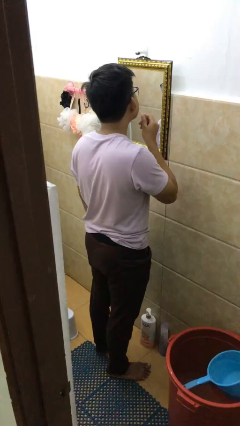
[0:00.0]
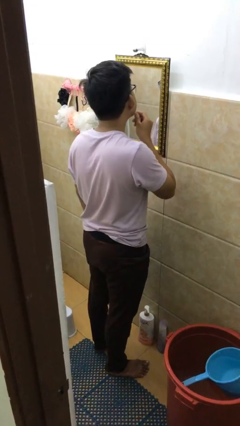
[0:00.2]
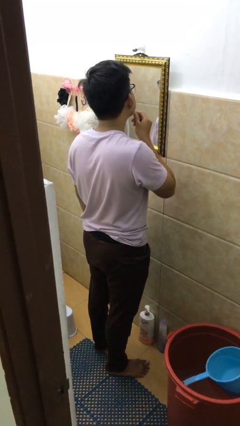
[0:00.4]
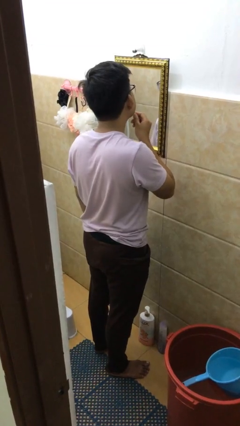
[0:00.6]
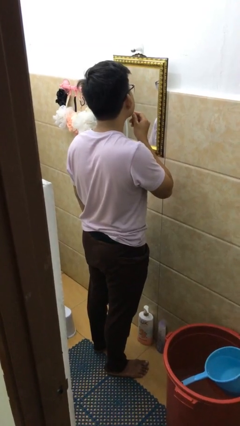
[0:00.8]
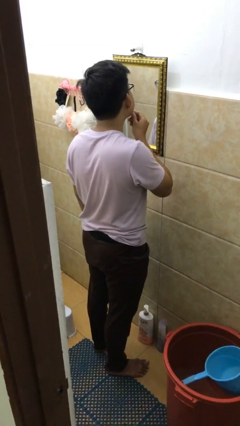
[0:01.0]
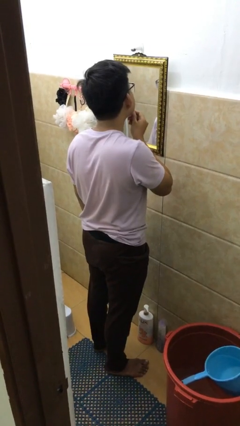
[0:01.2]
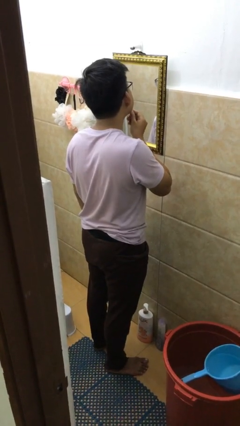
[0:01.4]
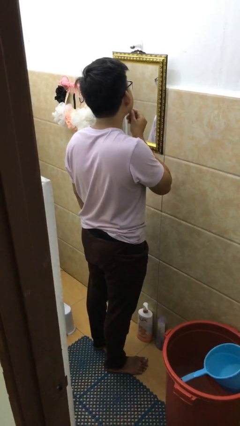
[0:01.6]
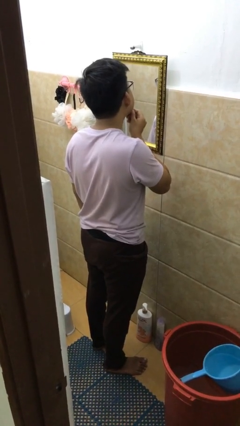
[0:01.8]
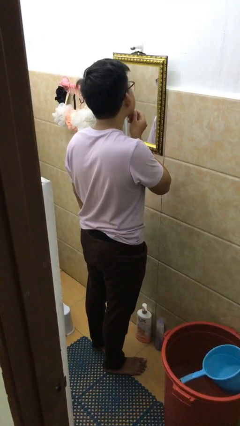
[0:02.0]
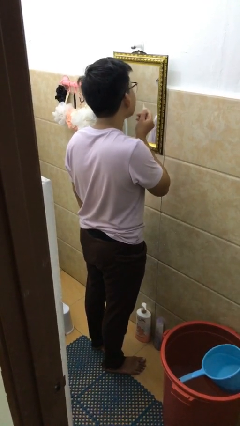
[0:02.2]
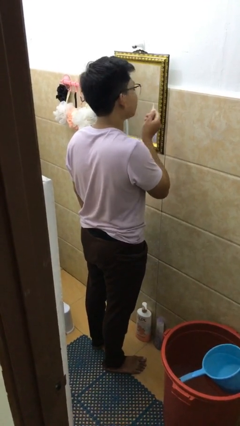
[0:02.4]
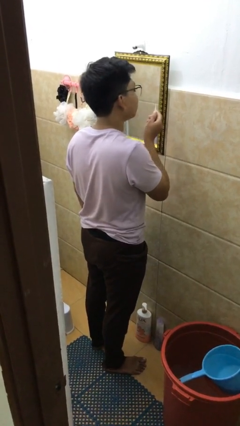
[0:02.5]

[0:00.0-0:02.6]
person flosses

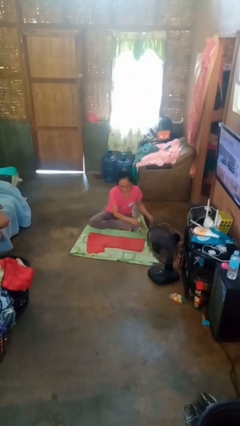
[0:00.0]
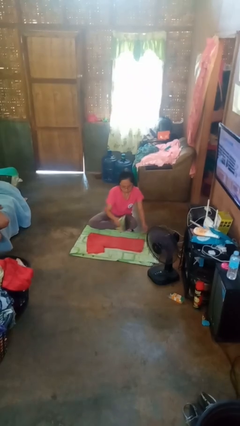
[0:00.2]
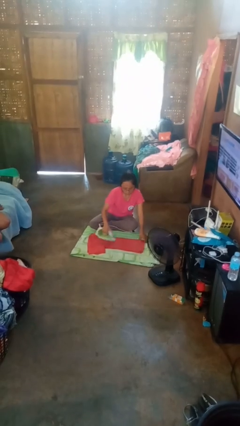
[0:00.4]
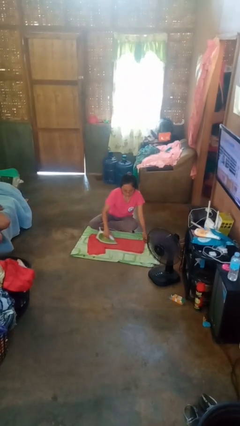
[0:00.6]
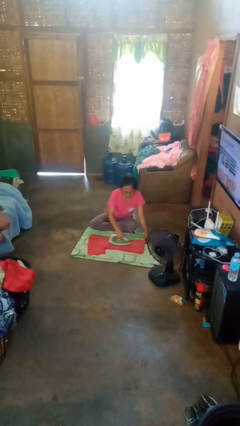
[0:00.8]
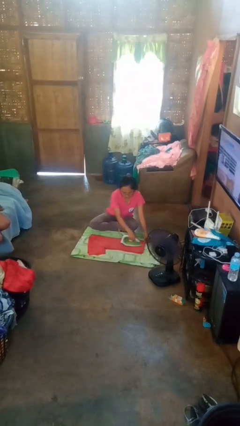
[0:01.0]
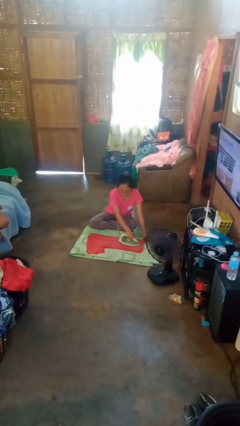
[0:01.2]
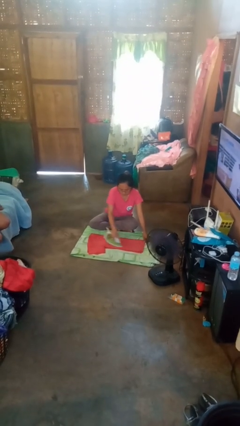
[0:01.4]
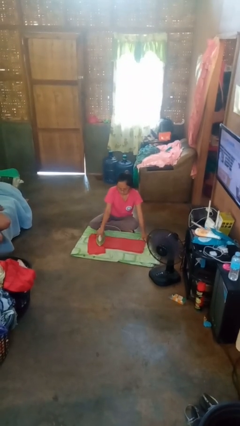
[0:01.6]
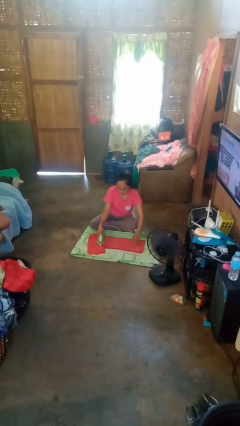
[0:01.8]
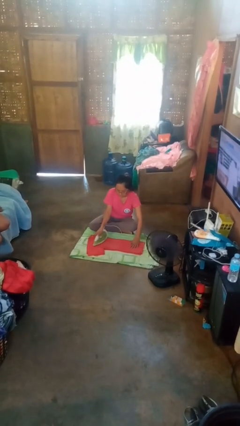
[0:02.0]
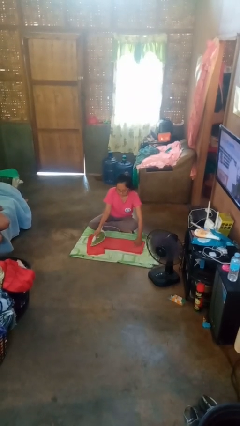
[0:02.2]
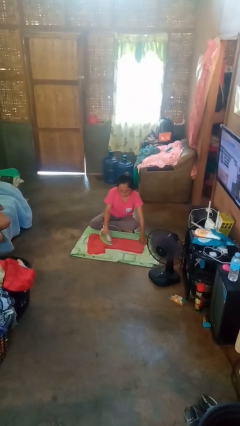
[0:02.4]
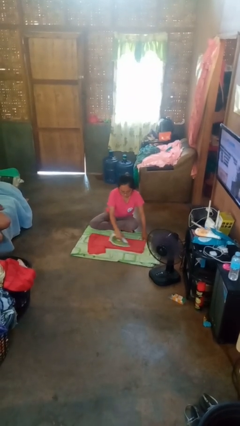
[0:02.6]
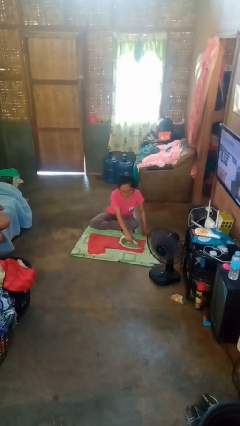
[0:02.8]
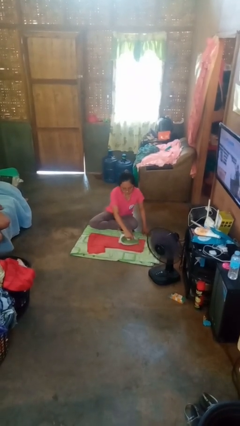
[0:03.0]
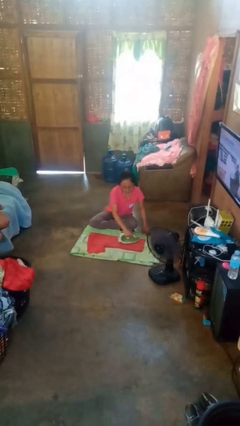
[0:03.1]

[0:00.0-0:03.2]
person irons clothes

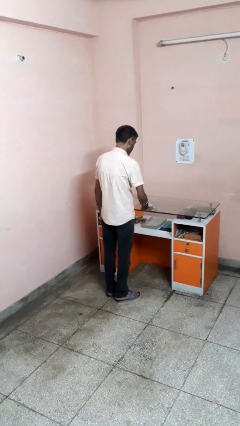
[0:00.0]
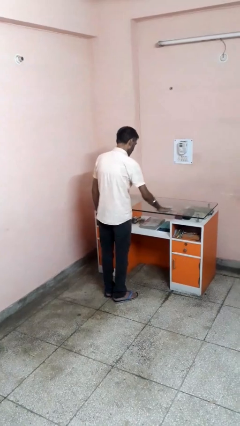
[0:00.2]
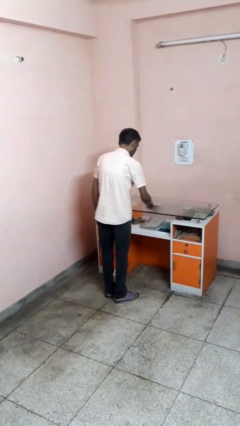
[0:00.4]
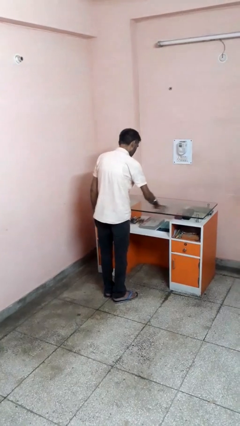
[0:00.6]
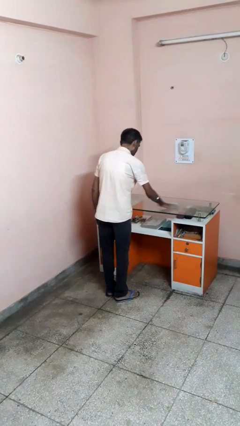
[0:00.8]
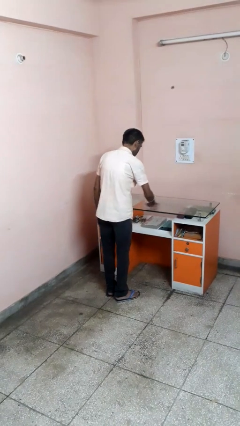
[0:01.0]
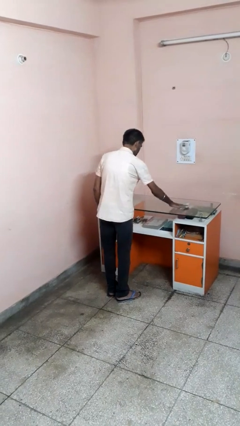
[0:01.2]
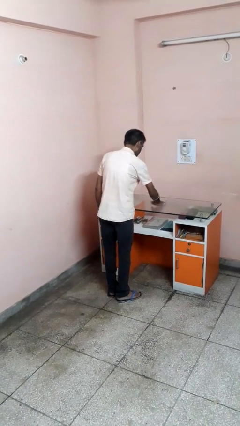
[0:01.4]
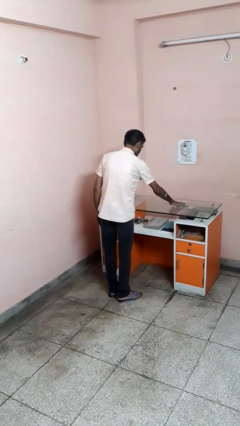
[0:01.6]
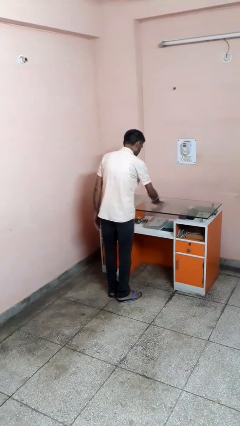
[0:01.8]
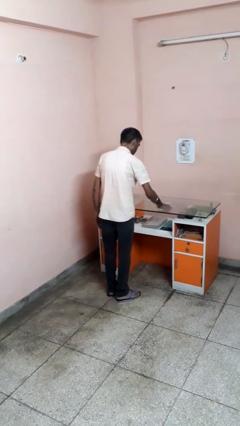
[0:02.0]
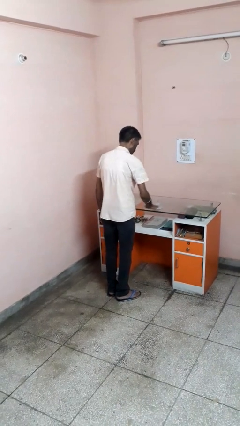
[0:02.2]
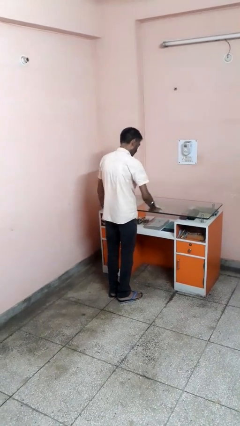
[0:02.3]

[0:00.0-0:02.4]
person cleans table with rag

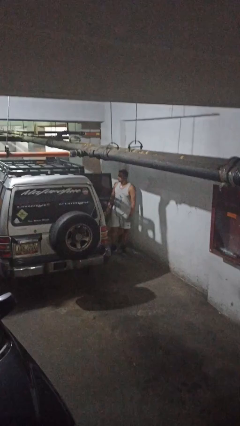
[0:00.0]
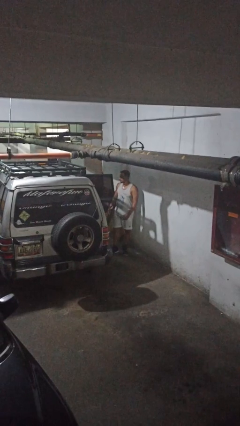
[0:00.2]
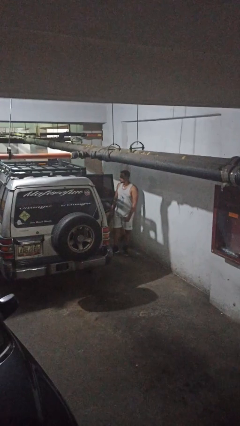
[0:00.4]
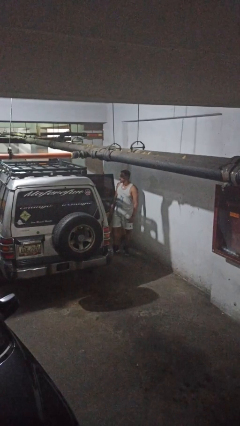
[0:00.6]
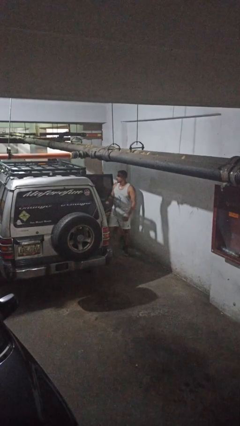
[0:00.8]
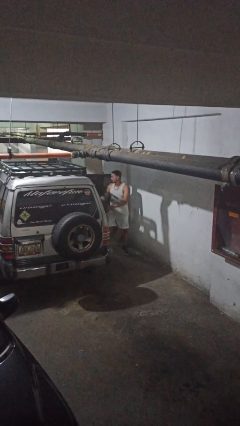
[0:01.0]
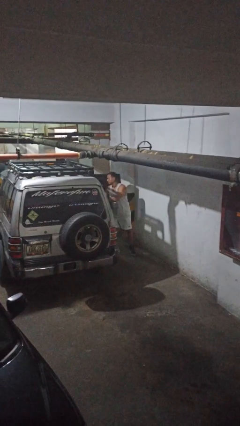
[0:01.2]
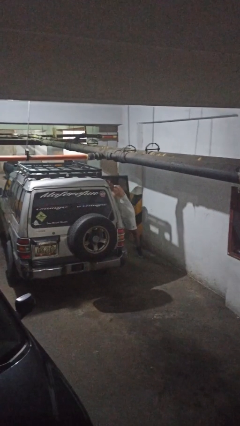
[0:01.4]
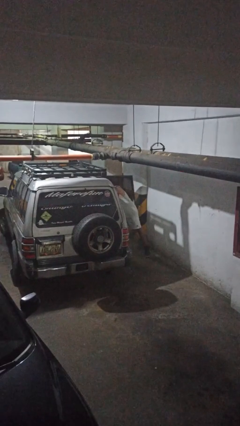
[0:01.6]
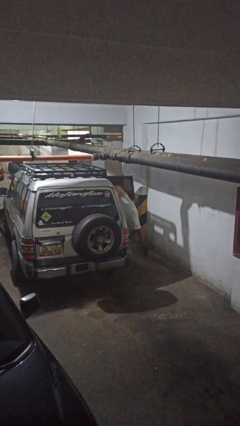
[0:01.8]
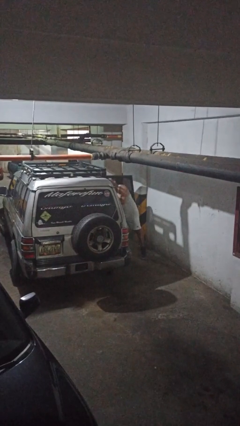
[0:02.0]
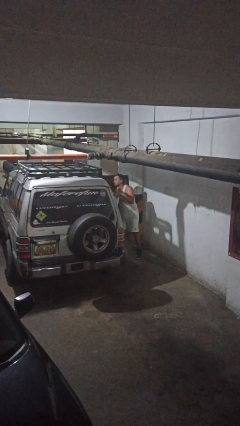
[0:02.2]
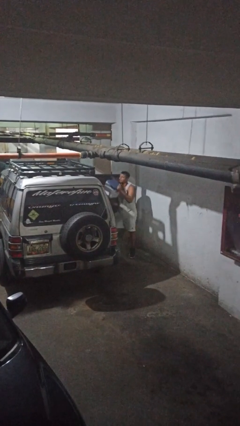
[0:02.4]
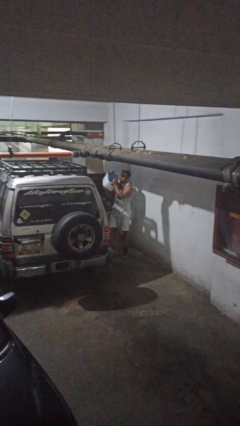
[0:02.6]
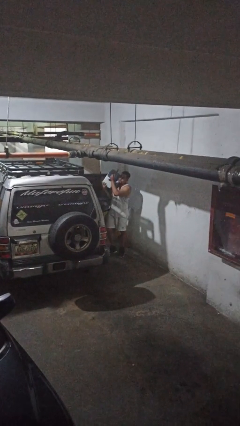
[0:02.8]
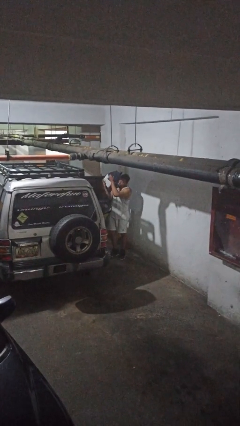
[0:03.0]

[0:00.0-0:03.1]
person unloads car

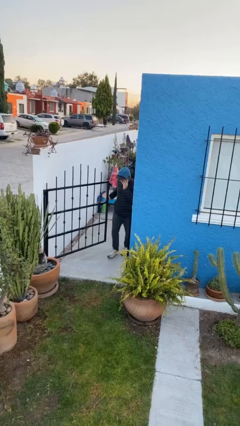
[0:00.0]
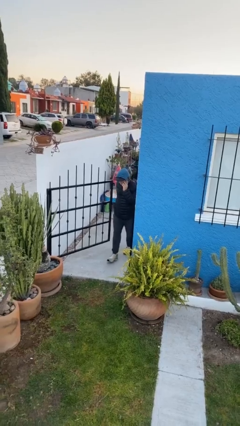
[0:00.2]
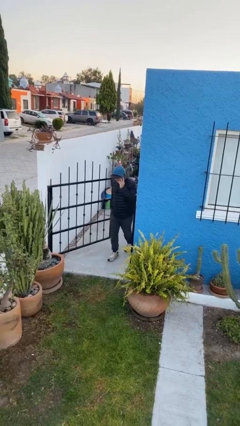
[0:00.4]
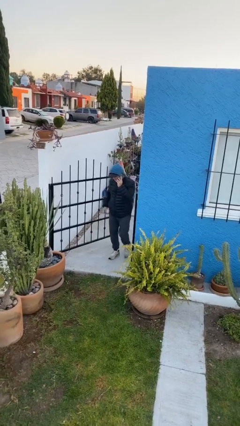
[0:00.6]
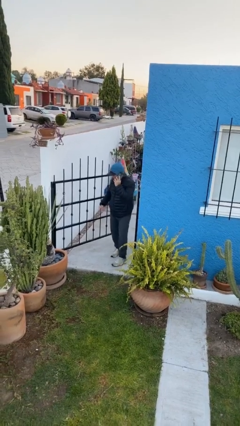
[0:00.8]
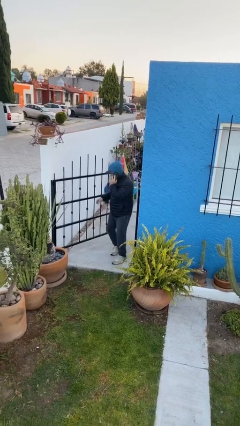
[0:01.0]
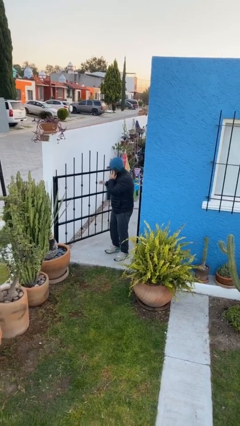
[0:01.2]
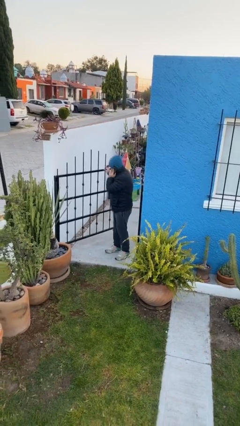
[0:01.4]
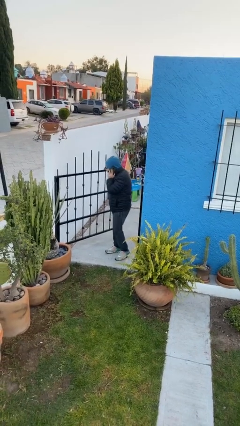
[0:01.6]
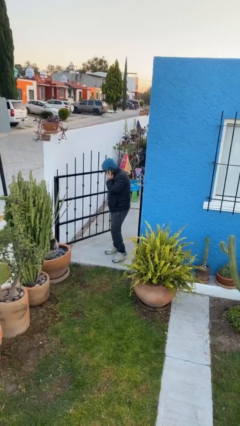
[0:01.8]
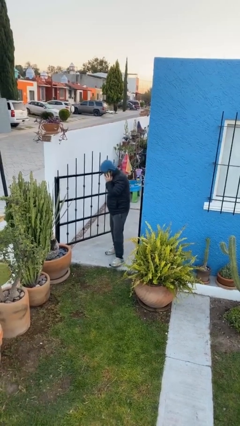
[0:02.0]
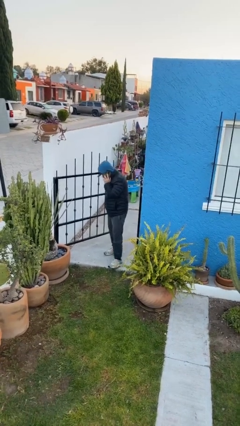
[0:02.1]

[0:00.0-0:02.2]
person enters scene through structure

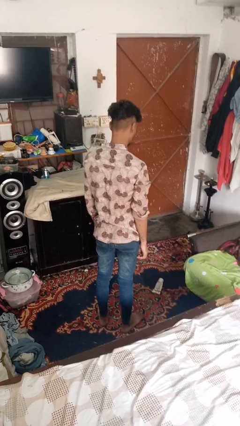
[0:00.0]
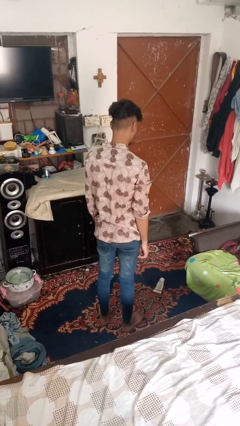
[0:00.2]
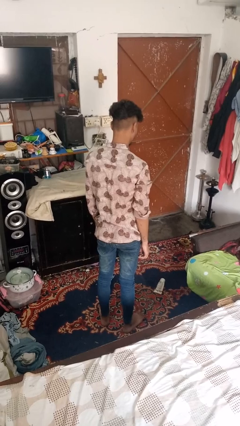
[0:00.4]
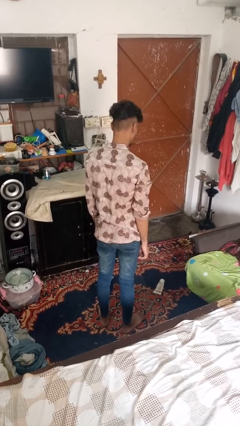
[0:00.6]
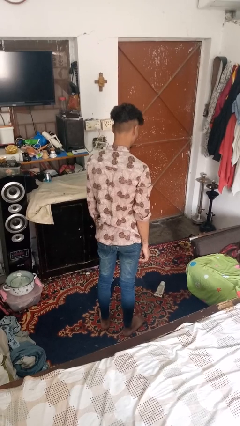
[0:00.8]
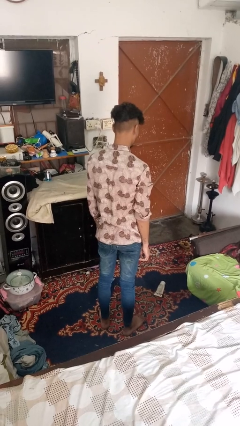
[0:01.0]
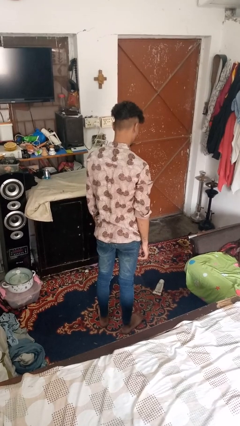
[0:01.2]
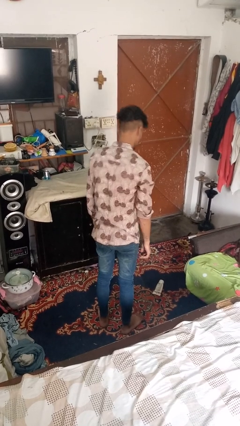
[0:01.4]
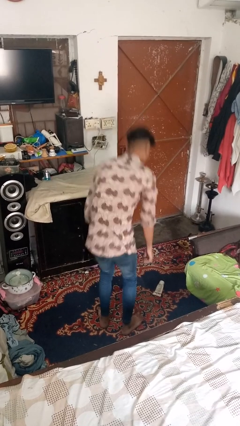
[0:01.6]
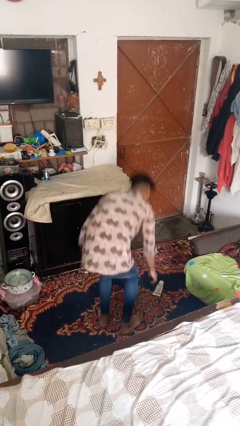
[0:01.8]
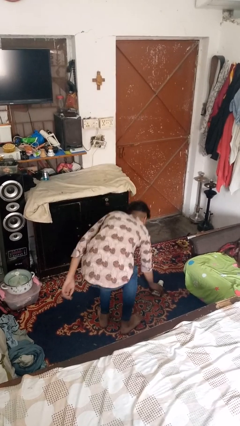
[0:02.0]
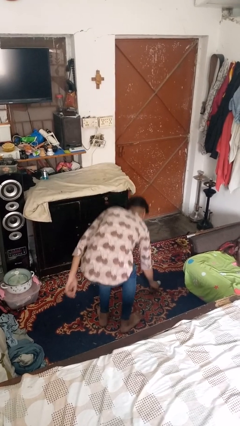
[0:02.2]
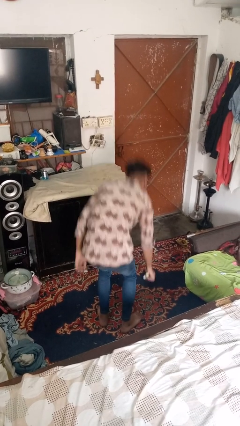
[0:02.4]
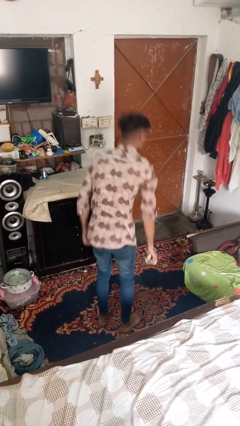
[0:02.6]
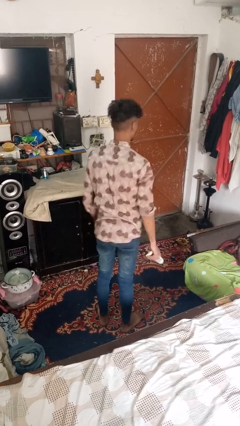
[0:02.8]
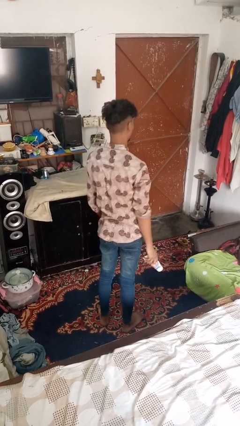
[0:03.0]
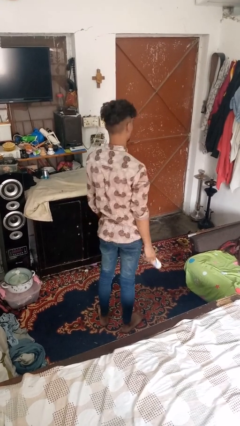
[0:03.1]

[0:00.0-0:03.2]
person picks up object from floor

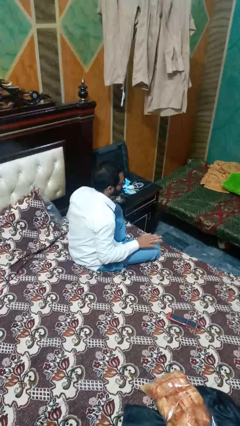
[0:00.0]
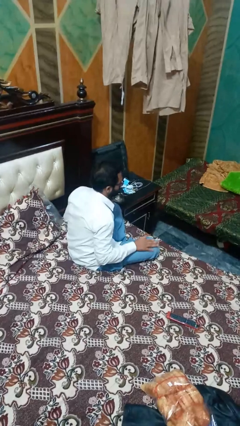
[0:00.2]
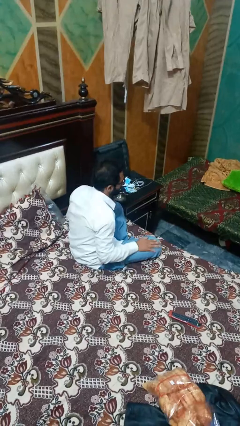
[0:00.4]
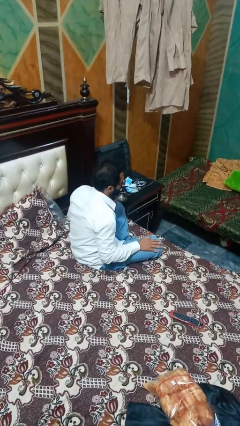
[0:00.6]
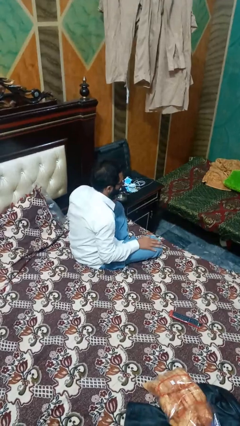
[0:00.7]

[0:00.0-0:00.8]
person slaps hands on thighs
